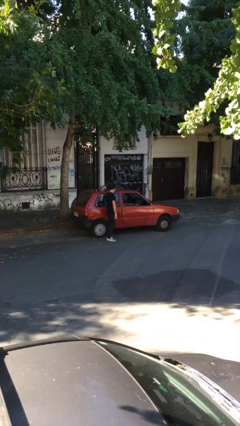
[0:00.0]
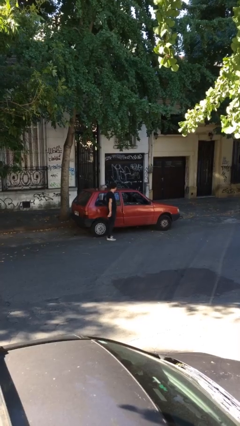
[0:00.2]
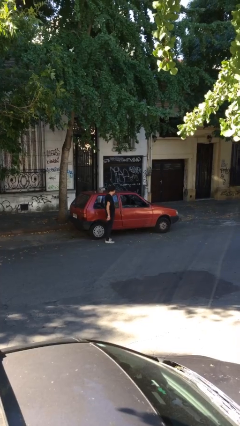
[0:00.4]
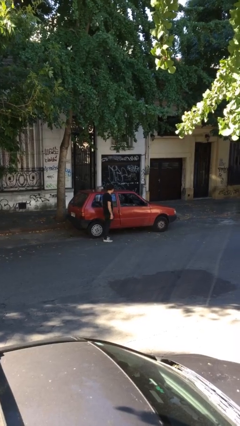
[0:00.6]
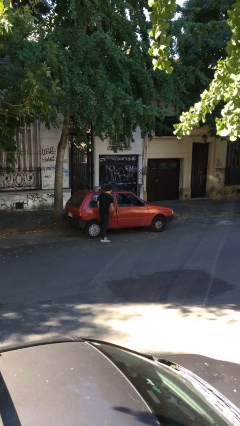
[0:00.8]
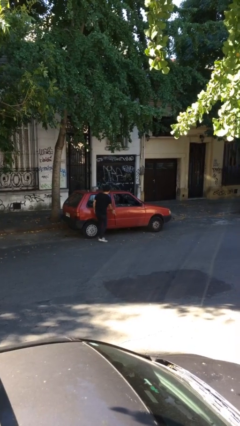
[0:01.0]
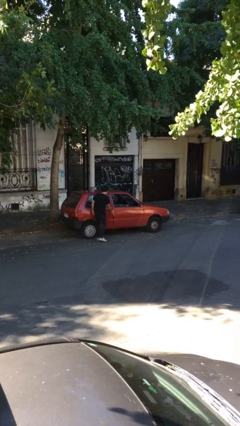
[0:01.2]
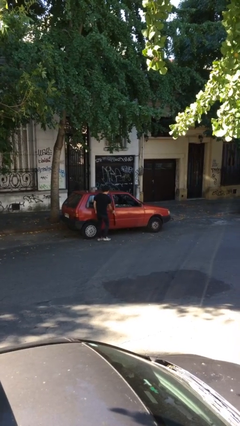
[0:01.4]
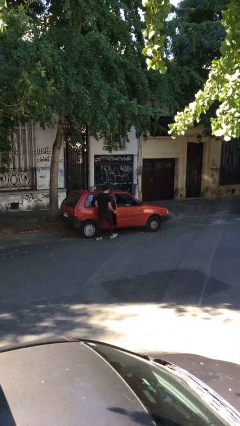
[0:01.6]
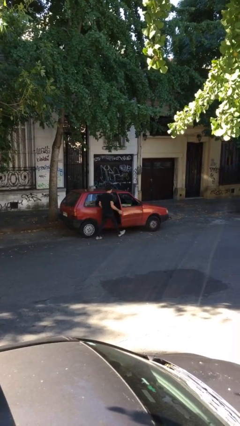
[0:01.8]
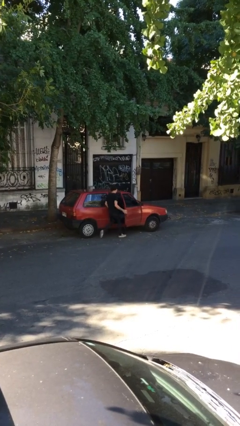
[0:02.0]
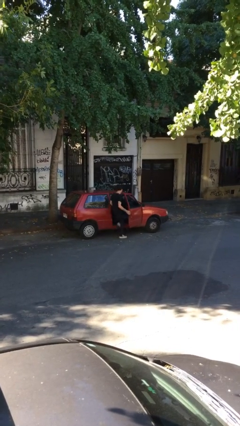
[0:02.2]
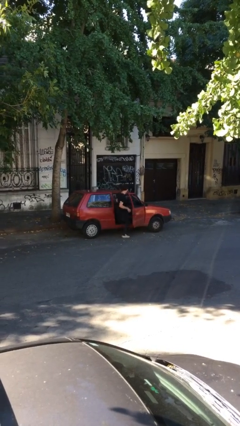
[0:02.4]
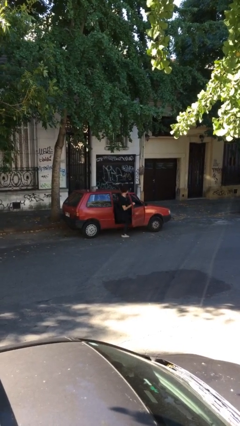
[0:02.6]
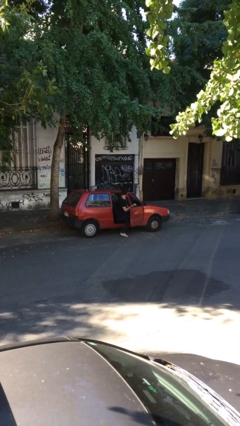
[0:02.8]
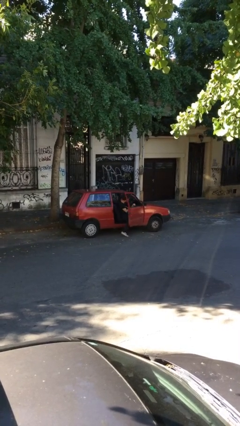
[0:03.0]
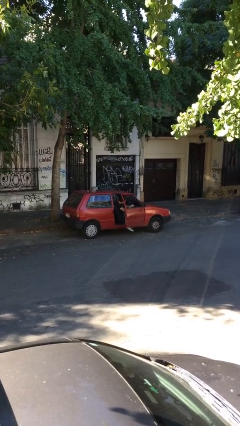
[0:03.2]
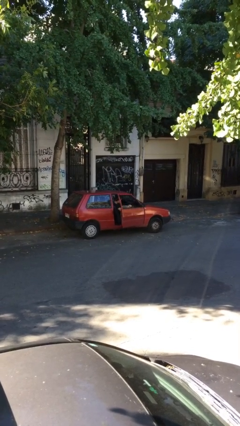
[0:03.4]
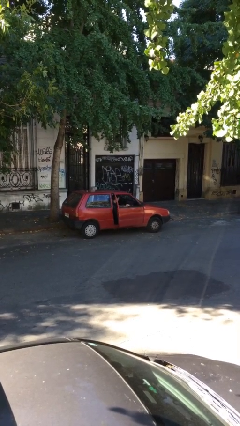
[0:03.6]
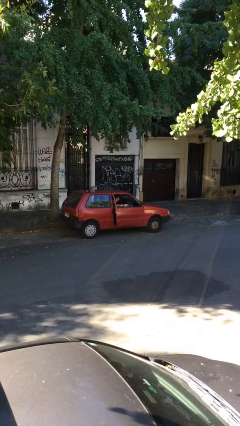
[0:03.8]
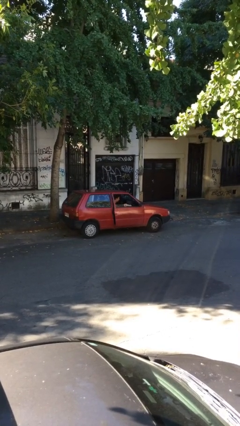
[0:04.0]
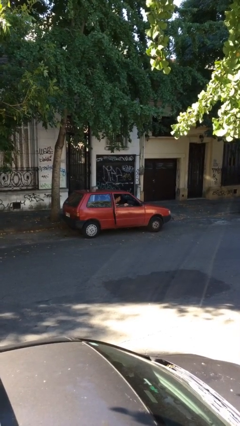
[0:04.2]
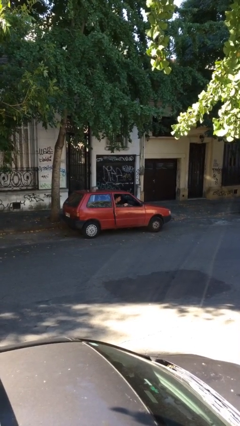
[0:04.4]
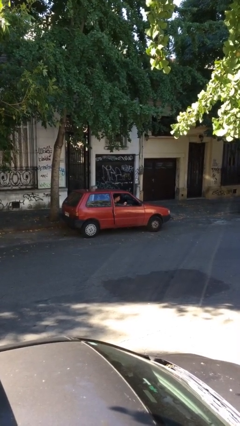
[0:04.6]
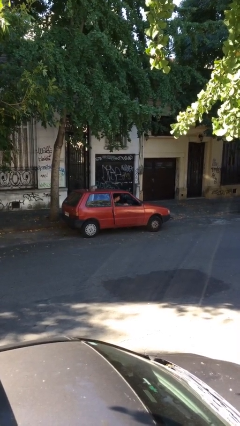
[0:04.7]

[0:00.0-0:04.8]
car picks up person

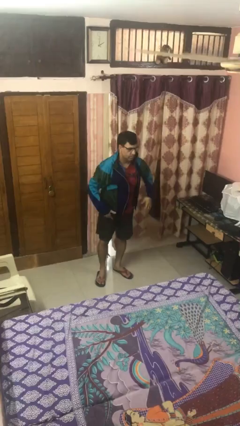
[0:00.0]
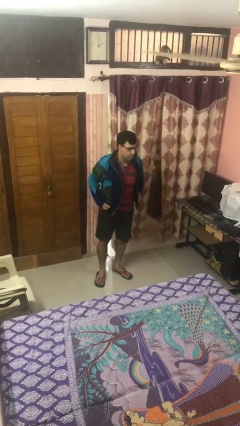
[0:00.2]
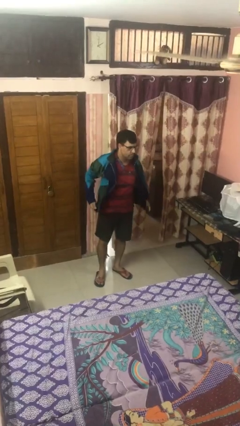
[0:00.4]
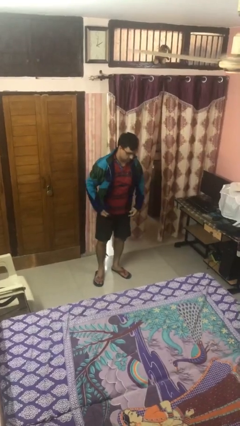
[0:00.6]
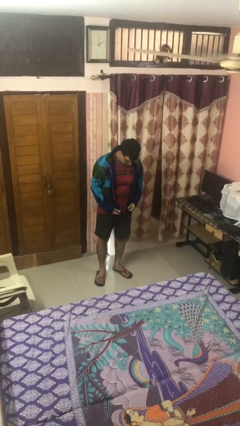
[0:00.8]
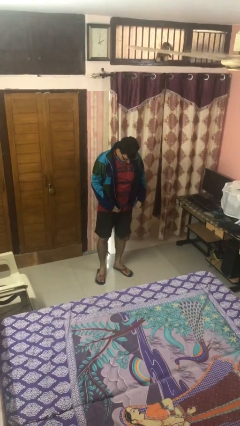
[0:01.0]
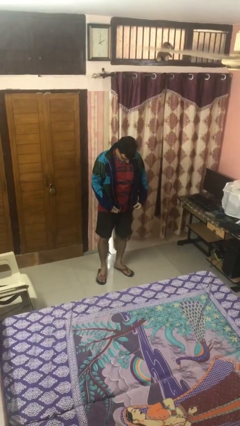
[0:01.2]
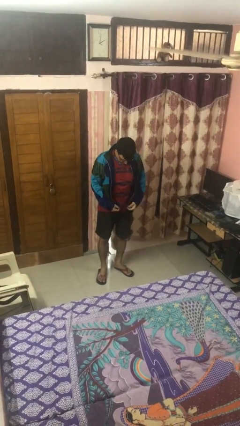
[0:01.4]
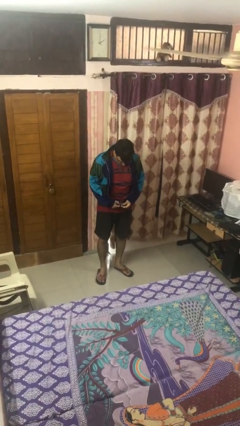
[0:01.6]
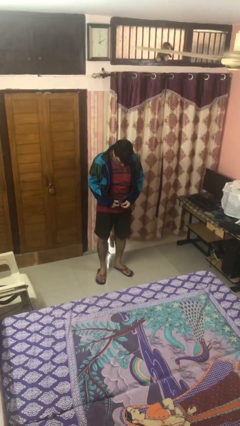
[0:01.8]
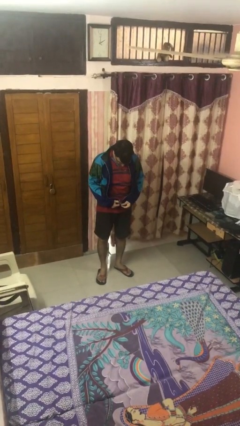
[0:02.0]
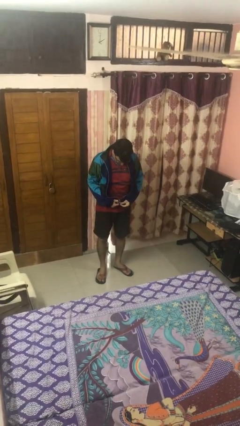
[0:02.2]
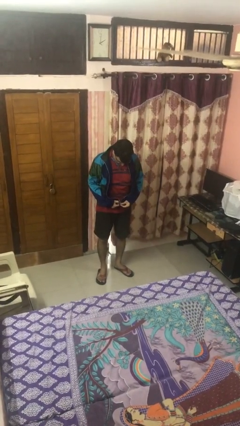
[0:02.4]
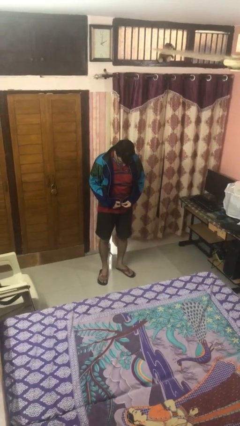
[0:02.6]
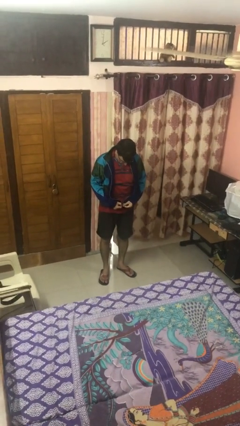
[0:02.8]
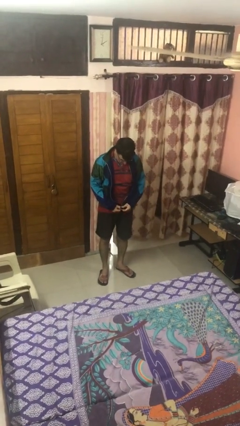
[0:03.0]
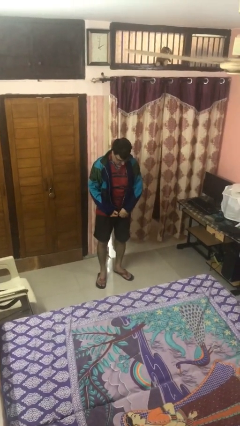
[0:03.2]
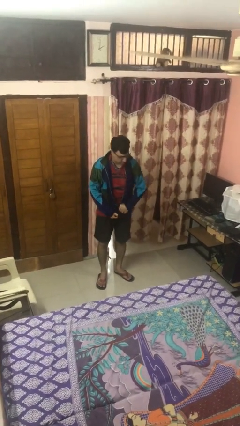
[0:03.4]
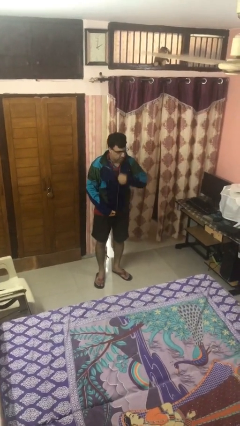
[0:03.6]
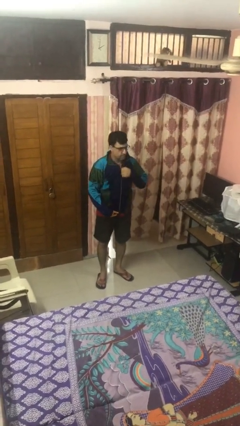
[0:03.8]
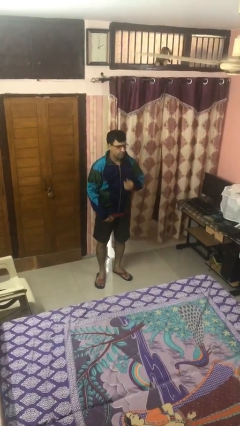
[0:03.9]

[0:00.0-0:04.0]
person zips up jacket

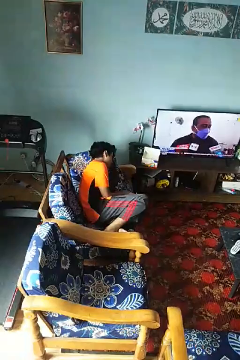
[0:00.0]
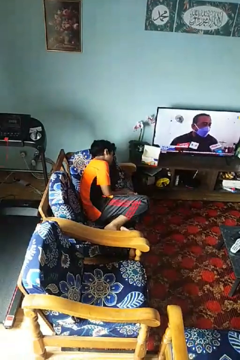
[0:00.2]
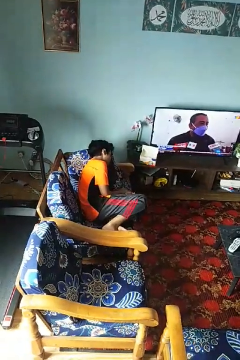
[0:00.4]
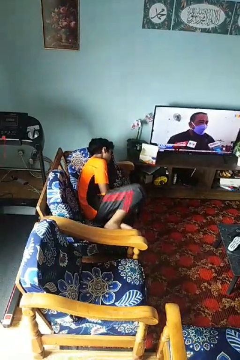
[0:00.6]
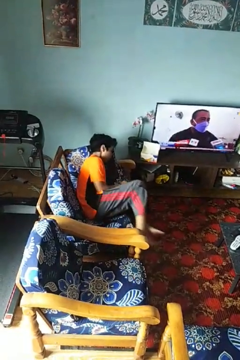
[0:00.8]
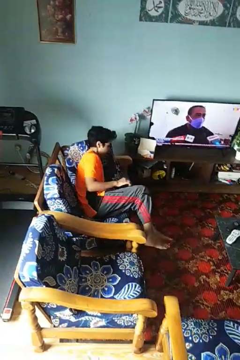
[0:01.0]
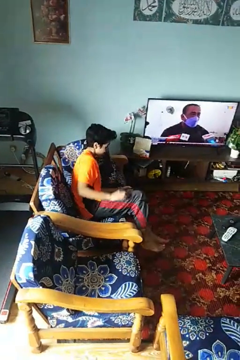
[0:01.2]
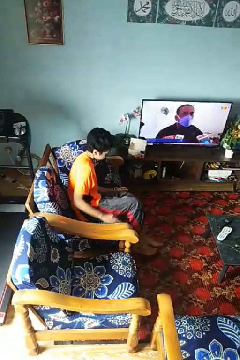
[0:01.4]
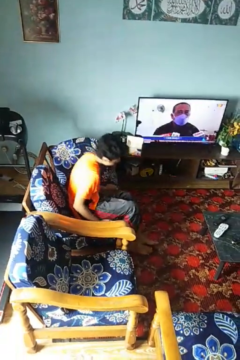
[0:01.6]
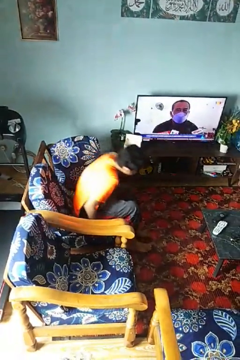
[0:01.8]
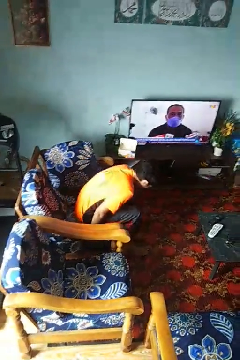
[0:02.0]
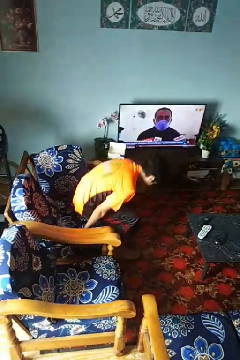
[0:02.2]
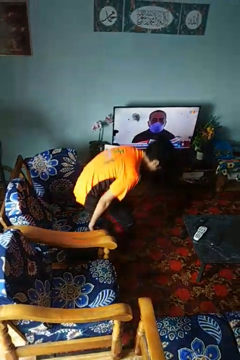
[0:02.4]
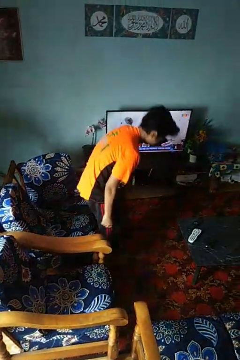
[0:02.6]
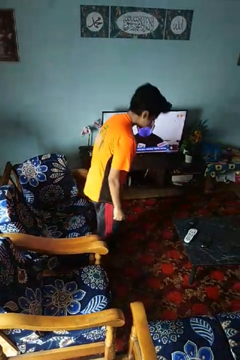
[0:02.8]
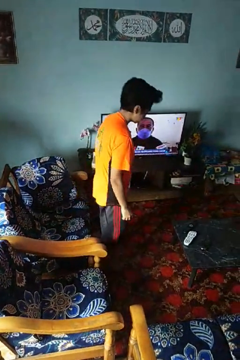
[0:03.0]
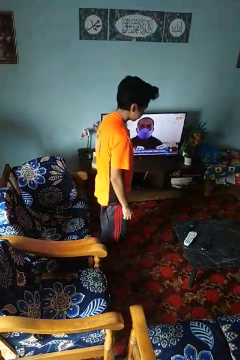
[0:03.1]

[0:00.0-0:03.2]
person stands up

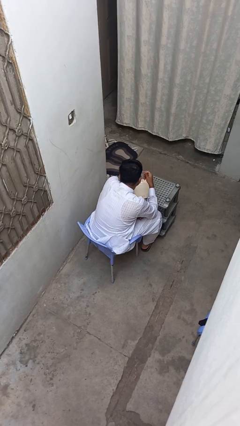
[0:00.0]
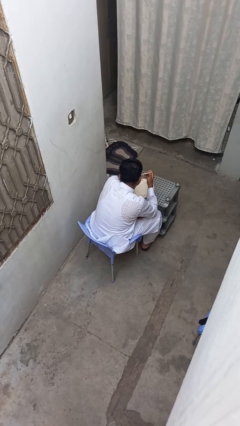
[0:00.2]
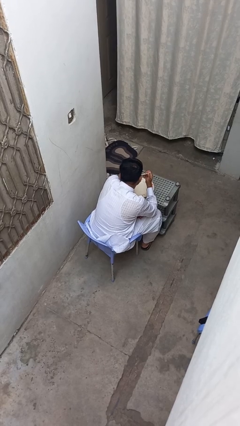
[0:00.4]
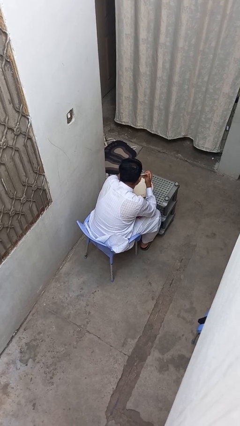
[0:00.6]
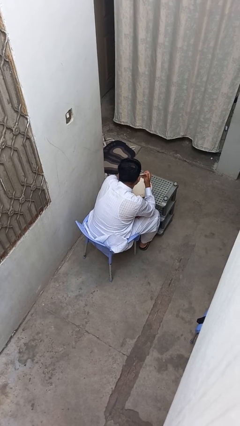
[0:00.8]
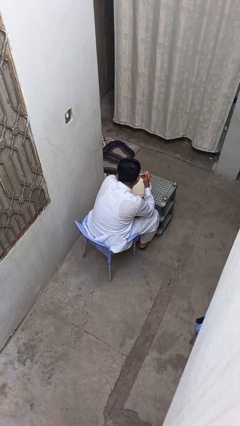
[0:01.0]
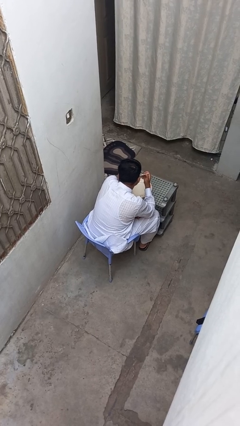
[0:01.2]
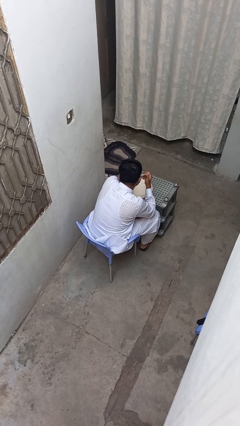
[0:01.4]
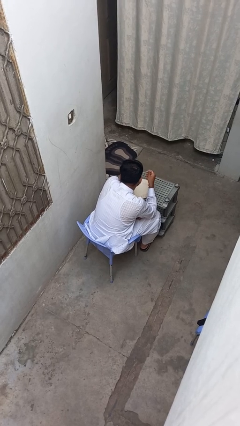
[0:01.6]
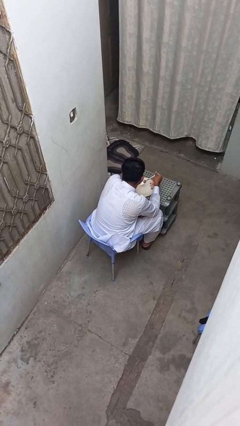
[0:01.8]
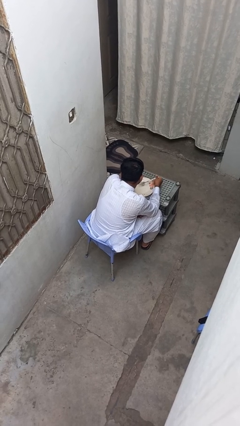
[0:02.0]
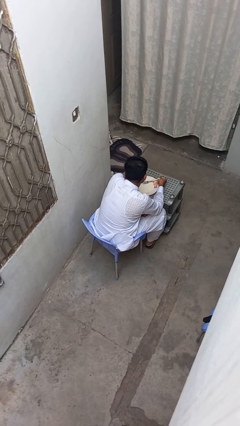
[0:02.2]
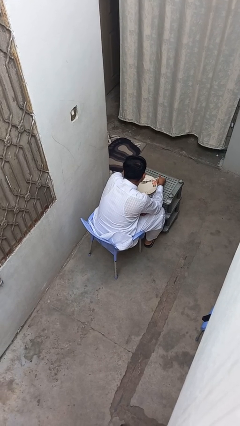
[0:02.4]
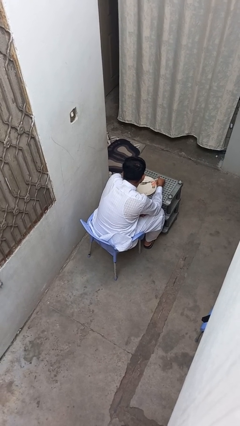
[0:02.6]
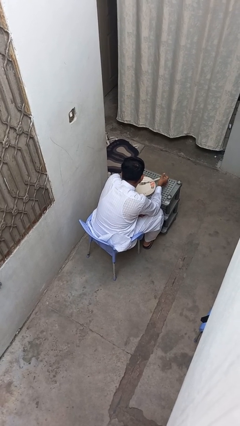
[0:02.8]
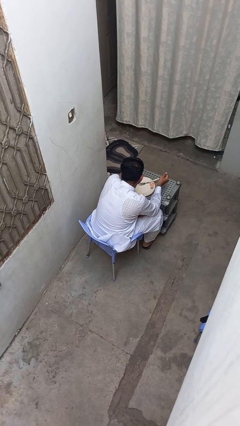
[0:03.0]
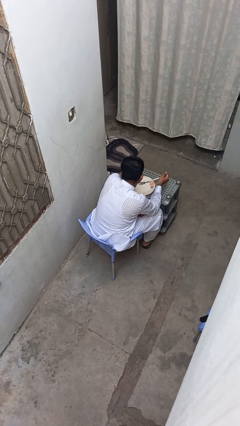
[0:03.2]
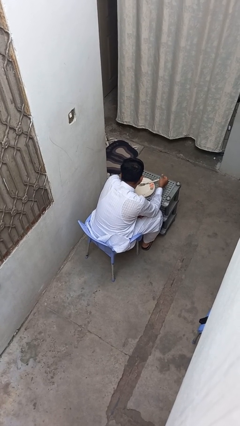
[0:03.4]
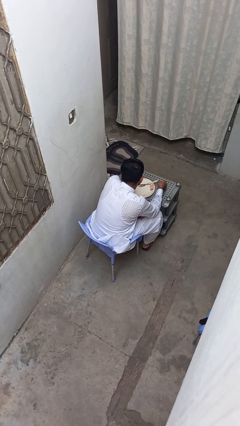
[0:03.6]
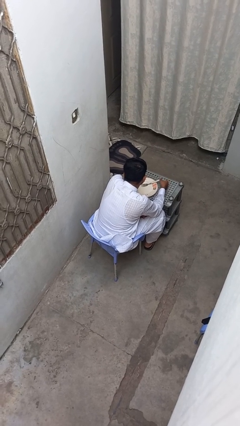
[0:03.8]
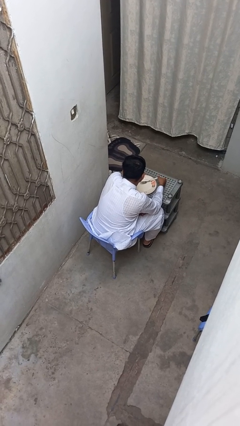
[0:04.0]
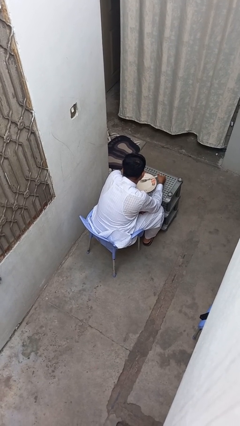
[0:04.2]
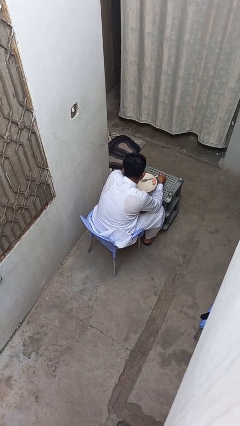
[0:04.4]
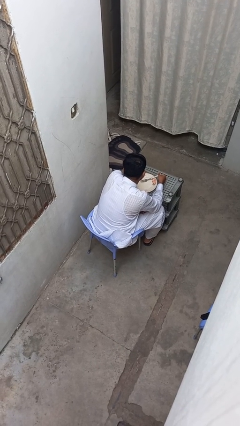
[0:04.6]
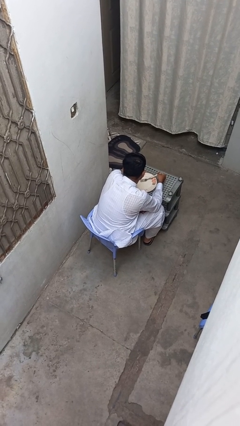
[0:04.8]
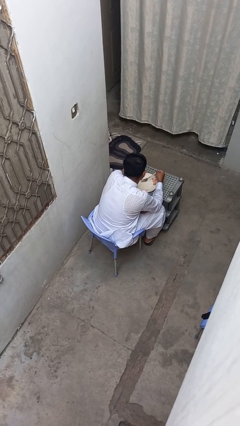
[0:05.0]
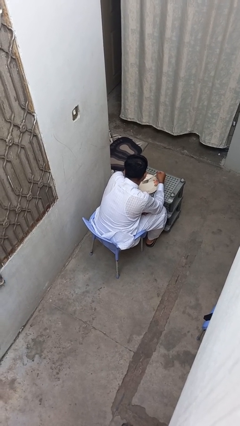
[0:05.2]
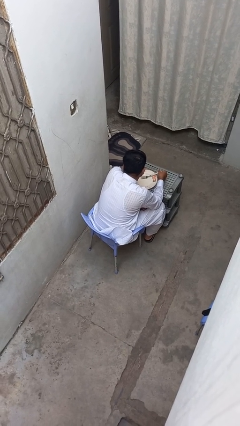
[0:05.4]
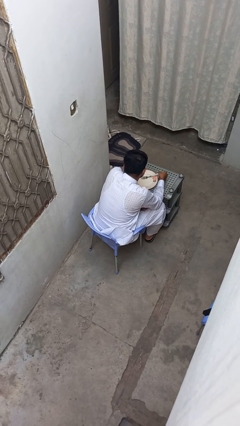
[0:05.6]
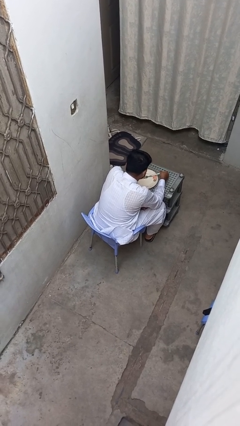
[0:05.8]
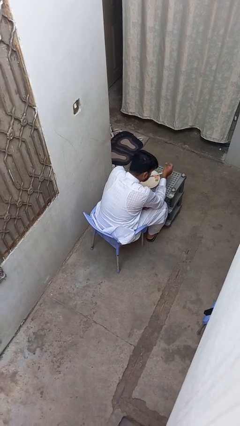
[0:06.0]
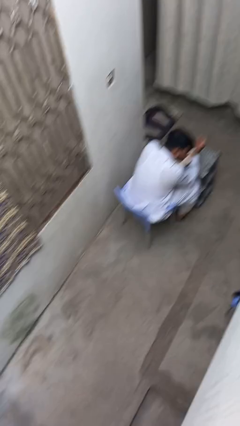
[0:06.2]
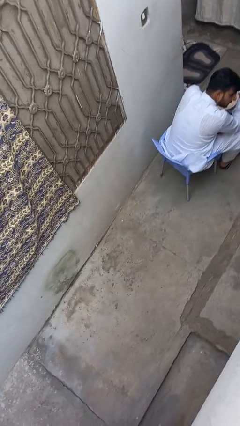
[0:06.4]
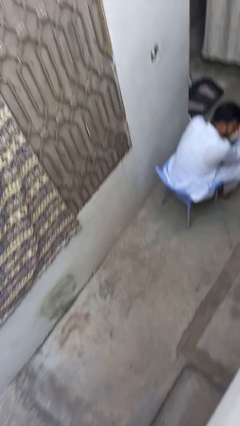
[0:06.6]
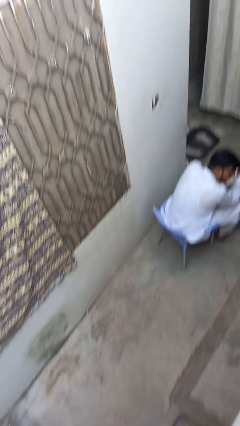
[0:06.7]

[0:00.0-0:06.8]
person eats with utensil
